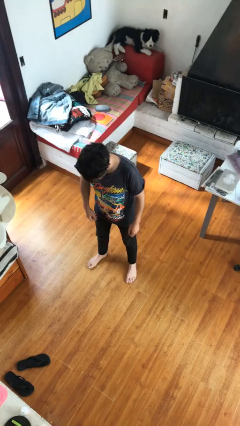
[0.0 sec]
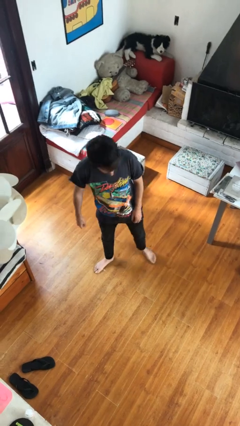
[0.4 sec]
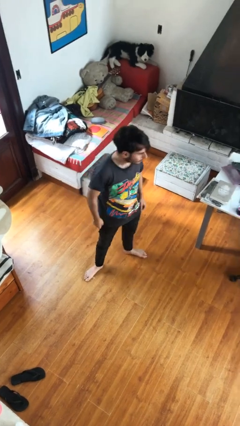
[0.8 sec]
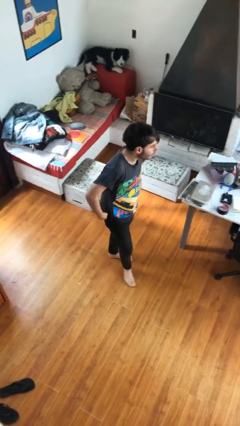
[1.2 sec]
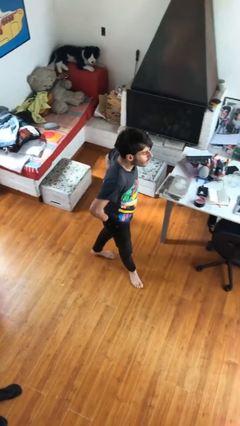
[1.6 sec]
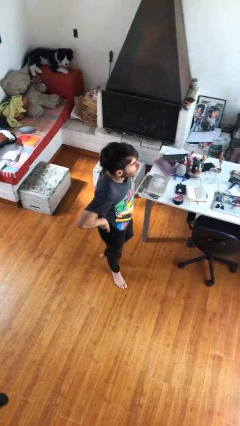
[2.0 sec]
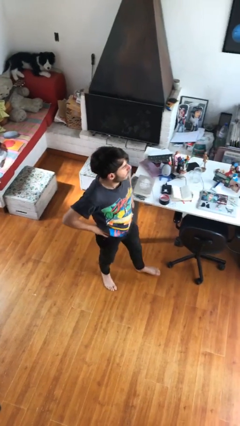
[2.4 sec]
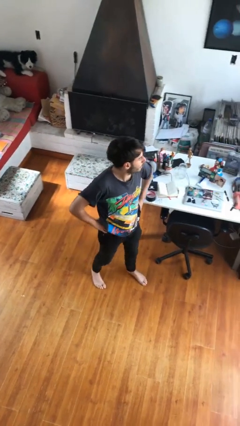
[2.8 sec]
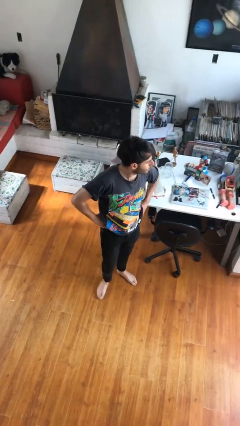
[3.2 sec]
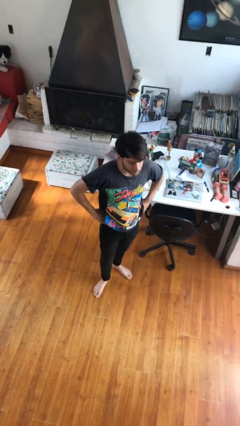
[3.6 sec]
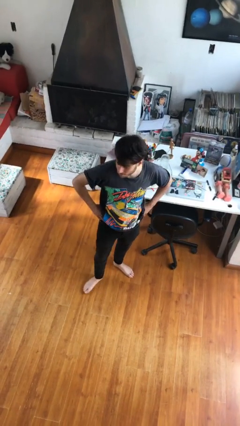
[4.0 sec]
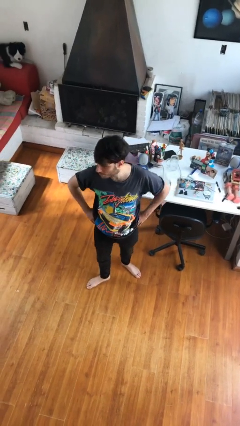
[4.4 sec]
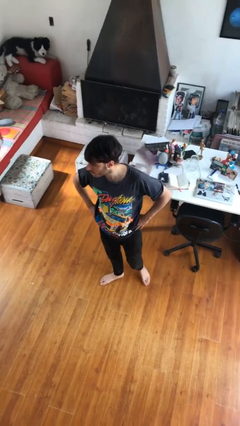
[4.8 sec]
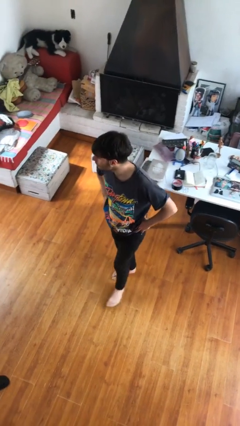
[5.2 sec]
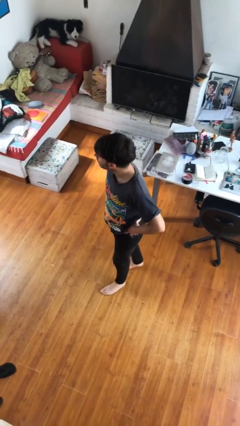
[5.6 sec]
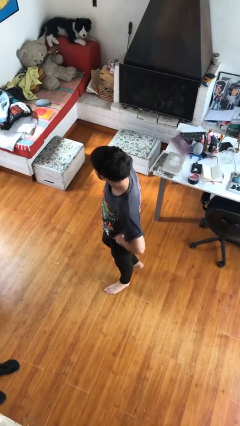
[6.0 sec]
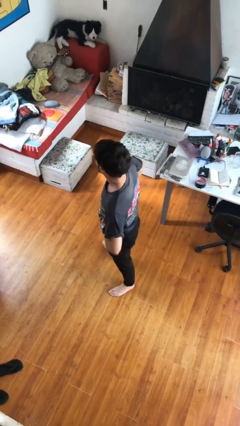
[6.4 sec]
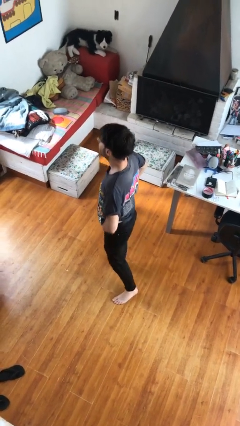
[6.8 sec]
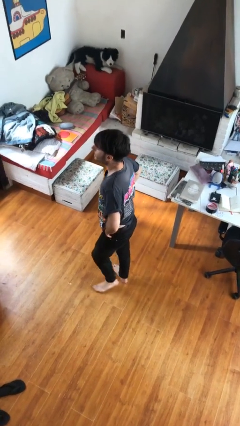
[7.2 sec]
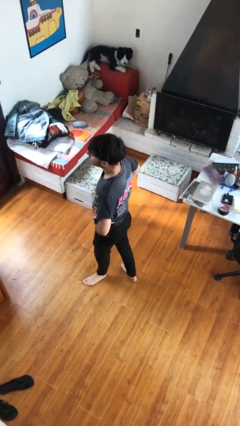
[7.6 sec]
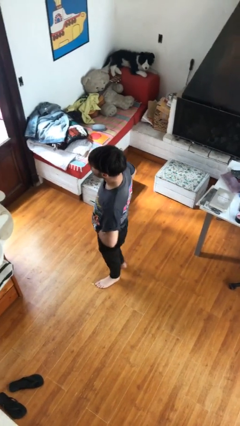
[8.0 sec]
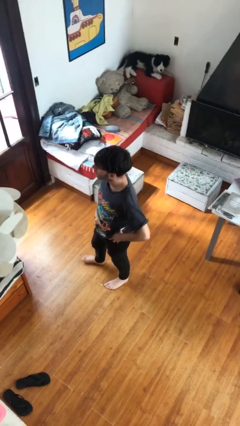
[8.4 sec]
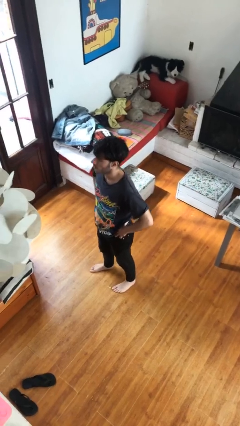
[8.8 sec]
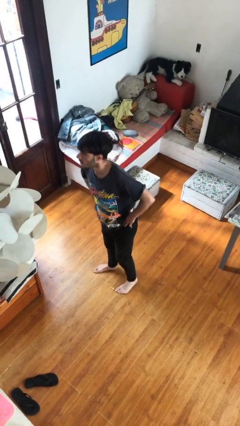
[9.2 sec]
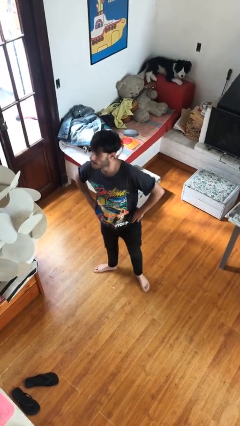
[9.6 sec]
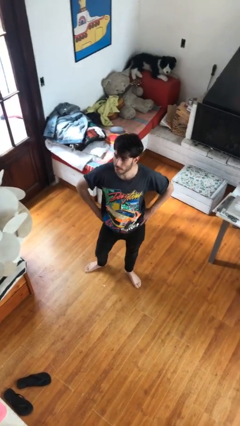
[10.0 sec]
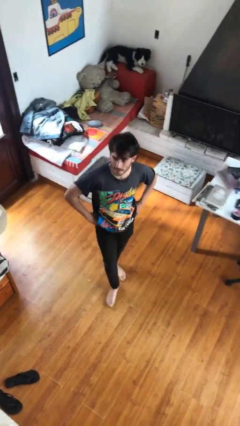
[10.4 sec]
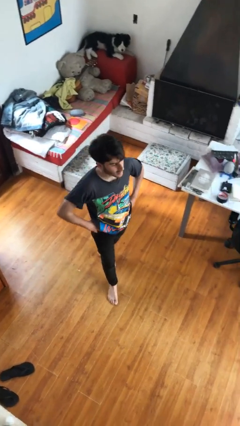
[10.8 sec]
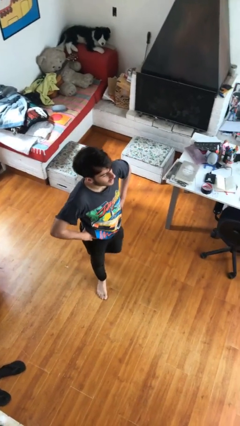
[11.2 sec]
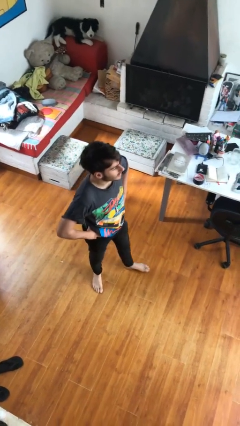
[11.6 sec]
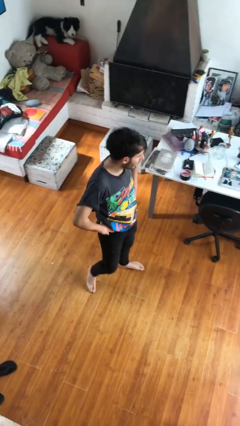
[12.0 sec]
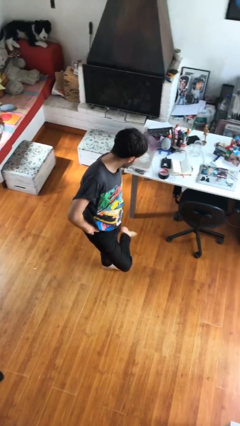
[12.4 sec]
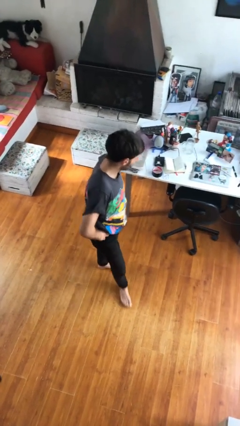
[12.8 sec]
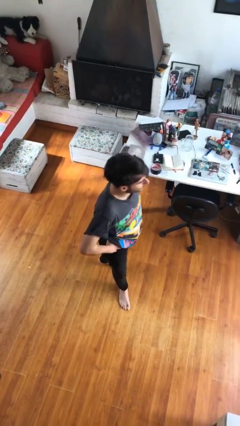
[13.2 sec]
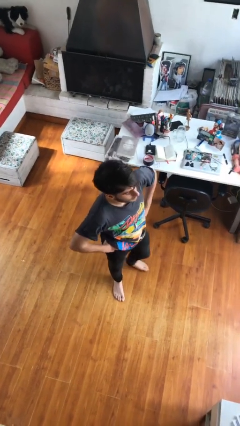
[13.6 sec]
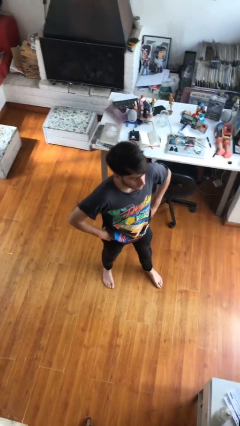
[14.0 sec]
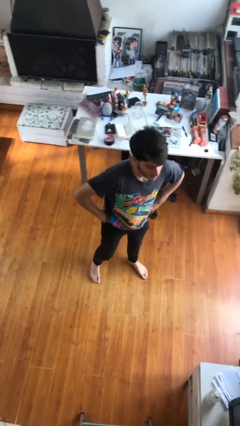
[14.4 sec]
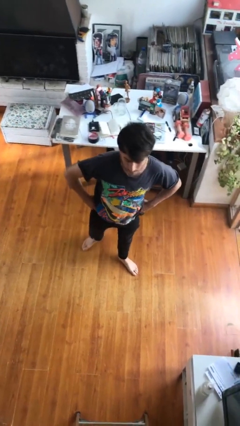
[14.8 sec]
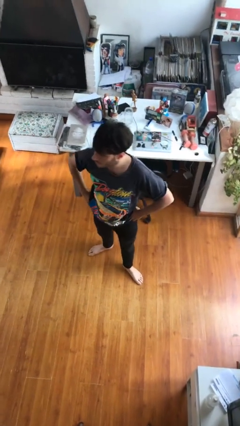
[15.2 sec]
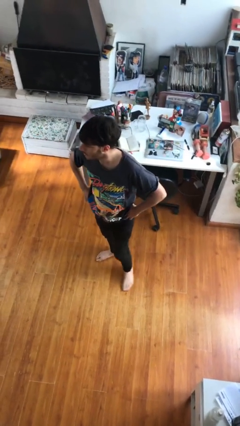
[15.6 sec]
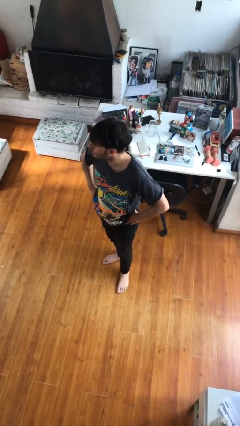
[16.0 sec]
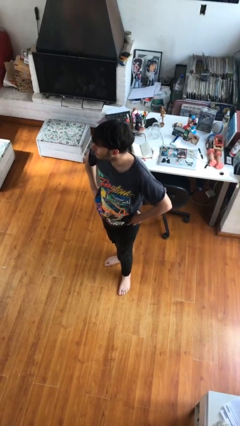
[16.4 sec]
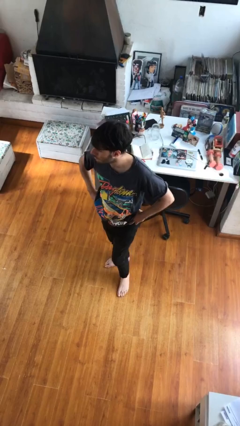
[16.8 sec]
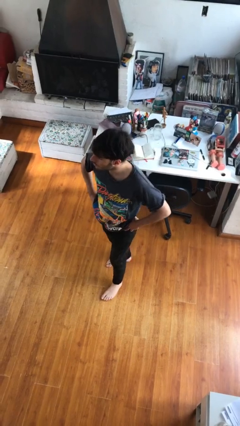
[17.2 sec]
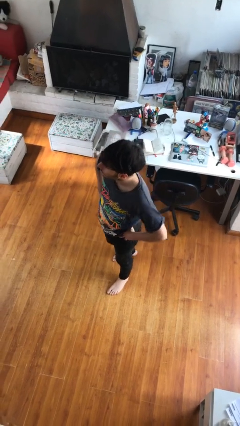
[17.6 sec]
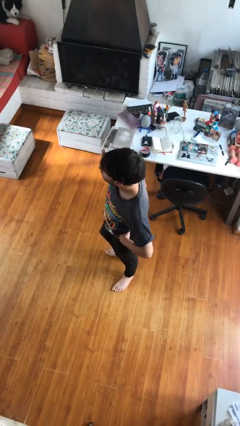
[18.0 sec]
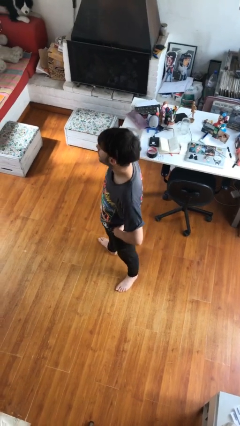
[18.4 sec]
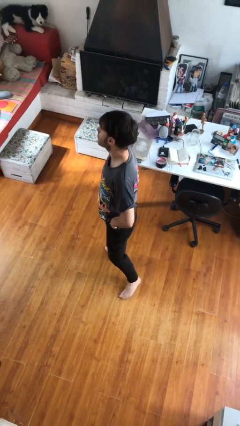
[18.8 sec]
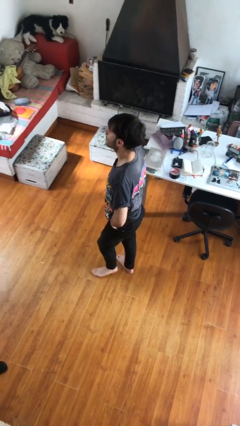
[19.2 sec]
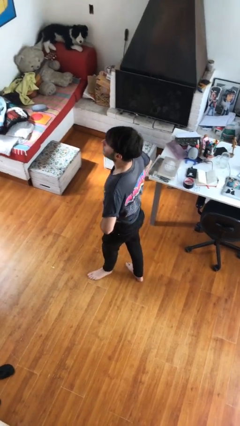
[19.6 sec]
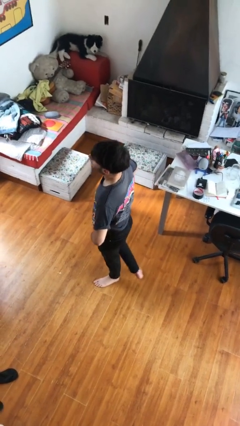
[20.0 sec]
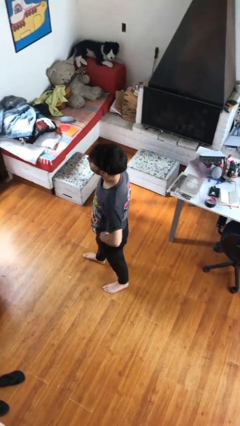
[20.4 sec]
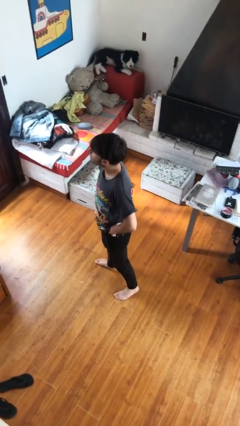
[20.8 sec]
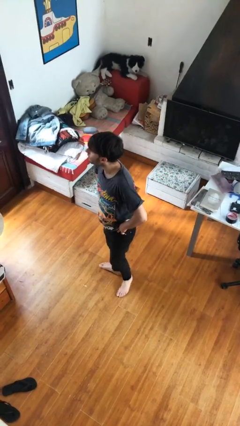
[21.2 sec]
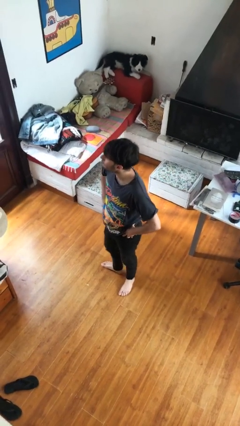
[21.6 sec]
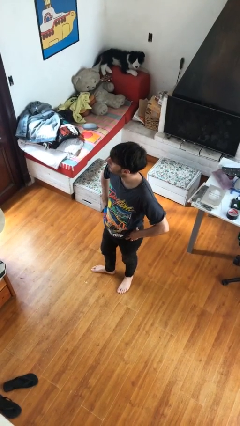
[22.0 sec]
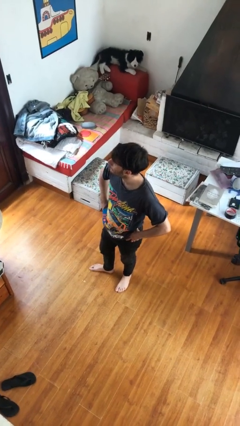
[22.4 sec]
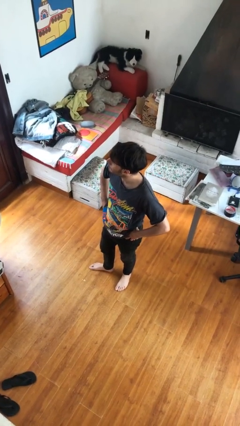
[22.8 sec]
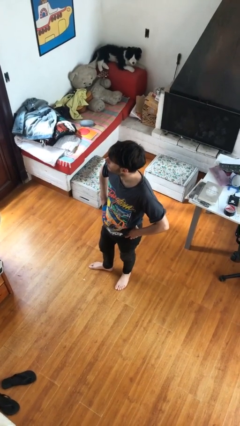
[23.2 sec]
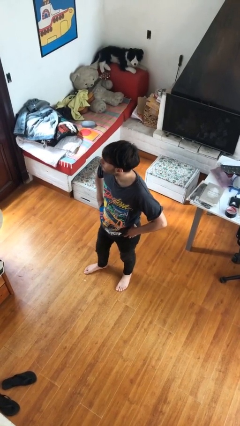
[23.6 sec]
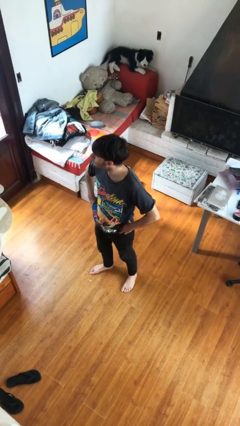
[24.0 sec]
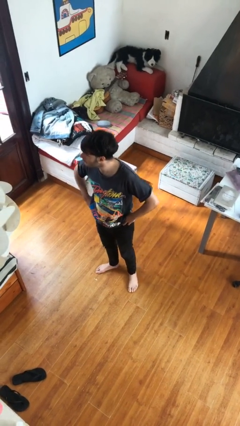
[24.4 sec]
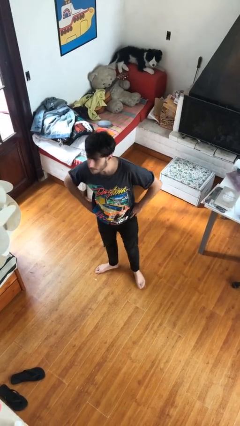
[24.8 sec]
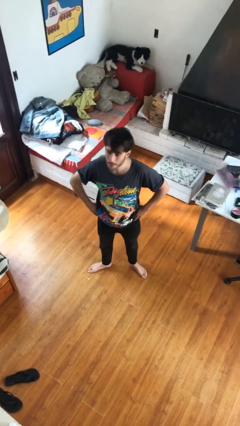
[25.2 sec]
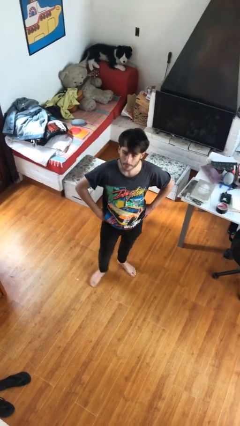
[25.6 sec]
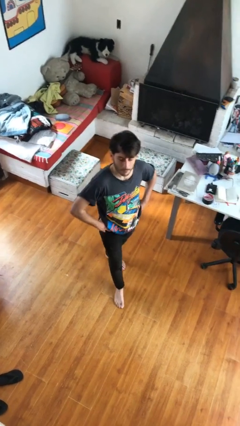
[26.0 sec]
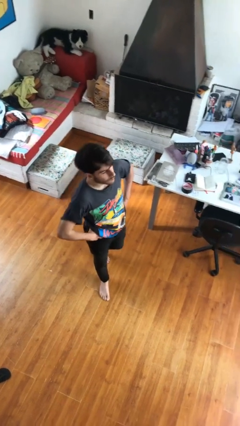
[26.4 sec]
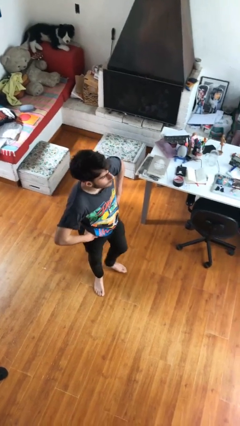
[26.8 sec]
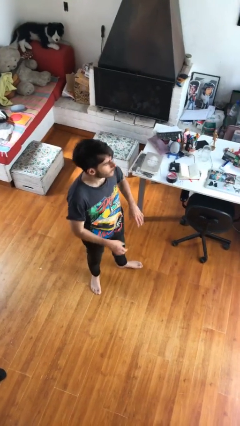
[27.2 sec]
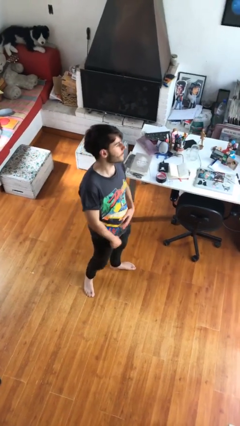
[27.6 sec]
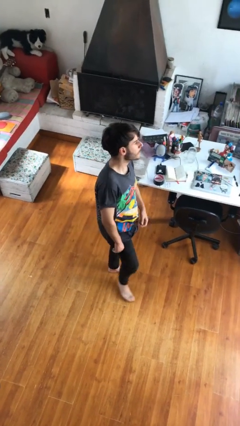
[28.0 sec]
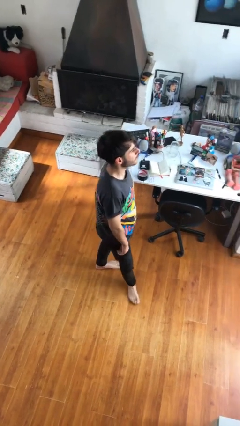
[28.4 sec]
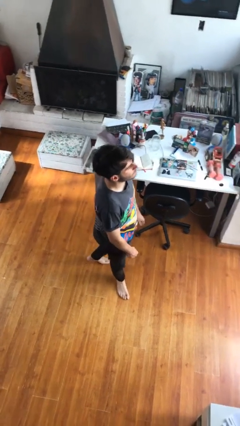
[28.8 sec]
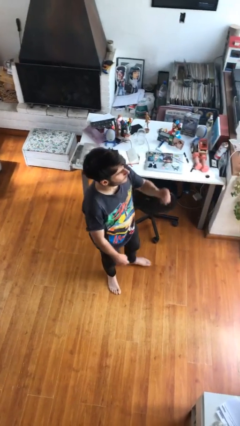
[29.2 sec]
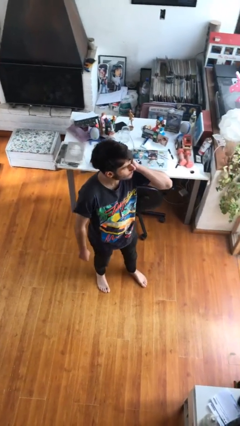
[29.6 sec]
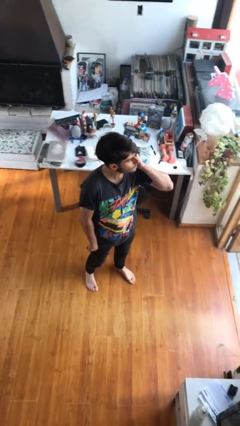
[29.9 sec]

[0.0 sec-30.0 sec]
person walks

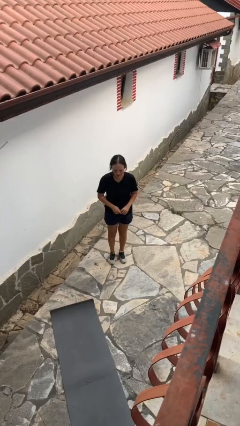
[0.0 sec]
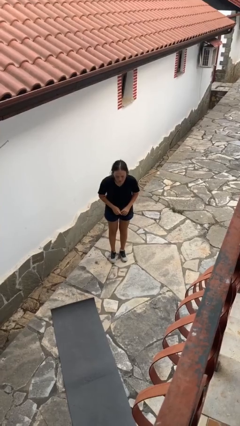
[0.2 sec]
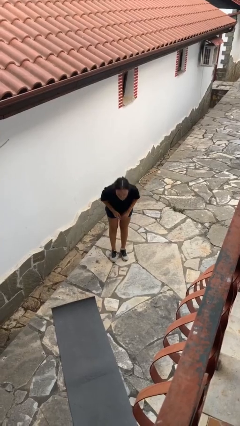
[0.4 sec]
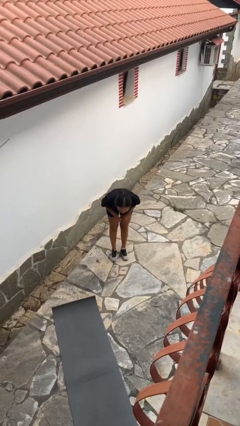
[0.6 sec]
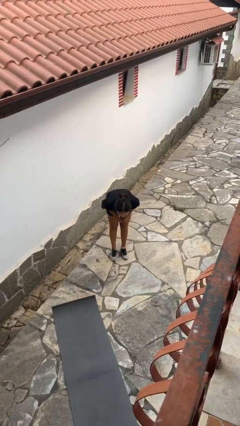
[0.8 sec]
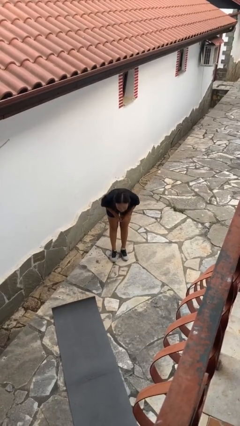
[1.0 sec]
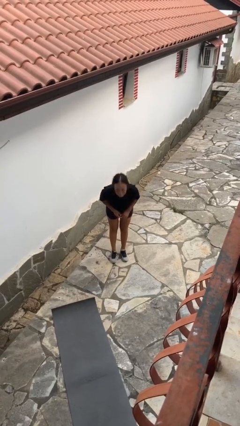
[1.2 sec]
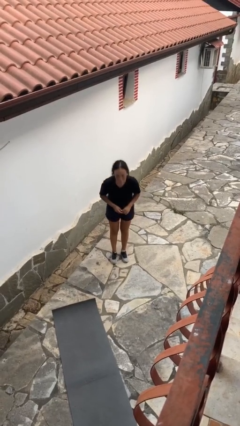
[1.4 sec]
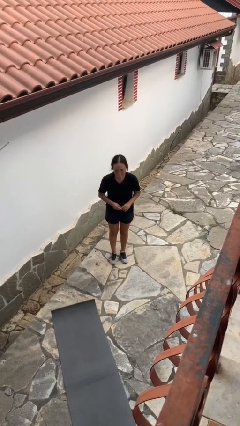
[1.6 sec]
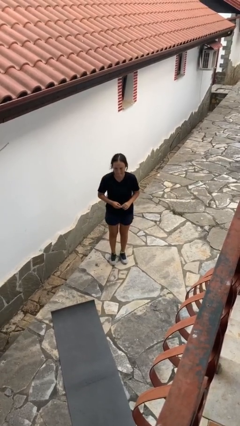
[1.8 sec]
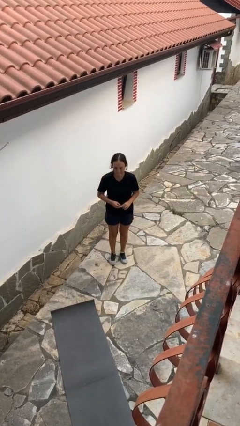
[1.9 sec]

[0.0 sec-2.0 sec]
person bows

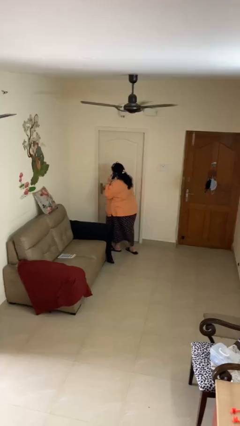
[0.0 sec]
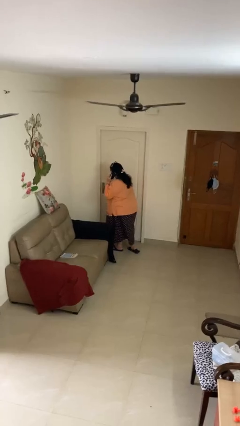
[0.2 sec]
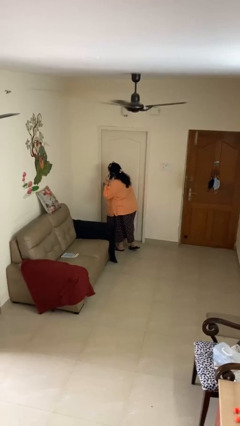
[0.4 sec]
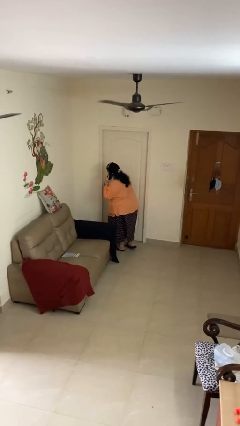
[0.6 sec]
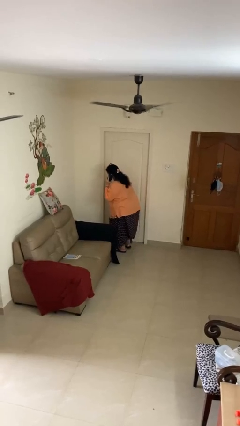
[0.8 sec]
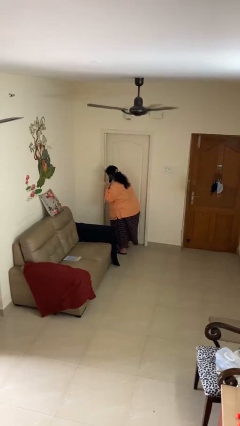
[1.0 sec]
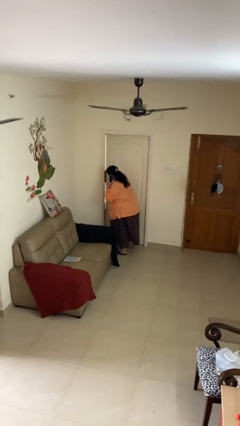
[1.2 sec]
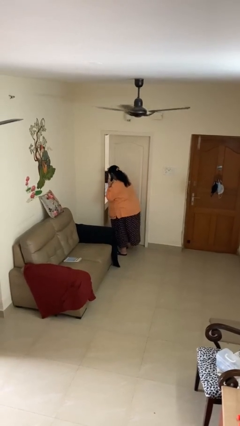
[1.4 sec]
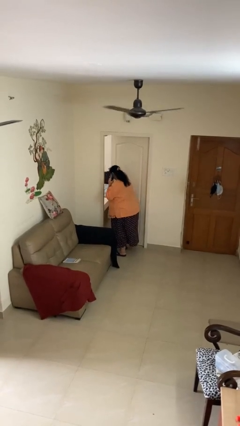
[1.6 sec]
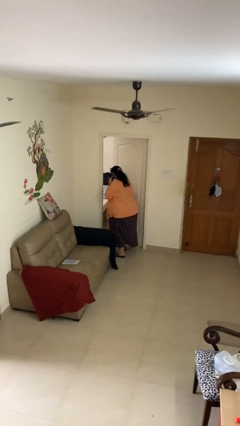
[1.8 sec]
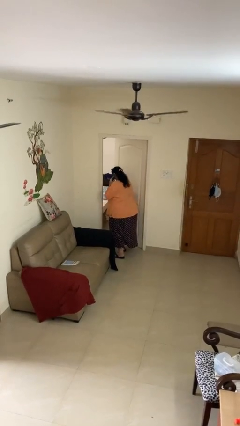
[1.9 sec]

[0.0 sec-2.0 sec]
person opens facility door
